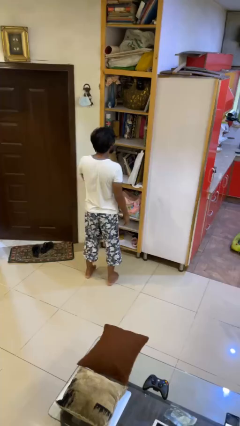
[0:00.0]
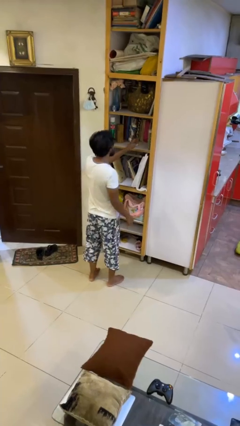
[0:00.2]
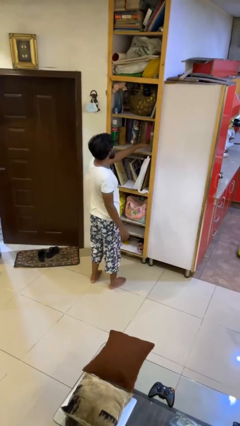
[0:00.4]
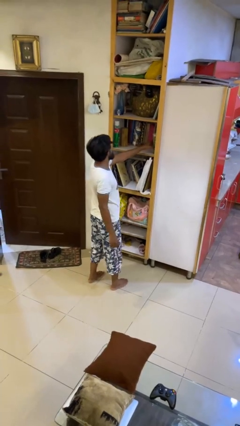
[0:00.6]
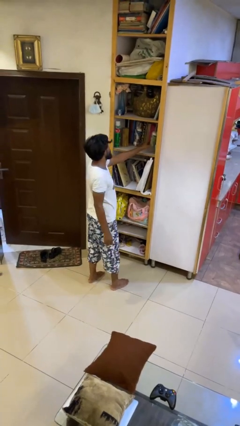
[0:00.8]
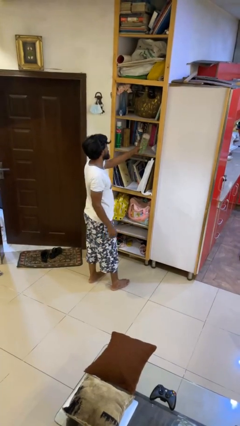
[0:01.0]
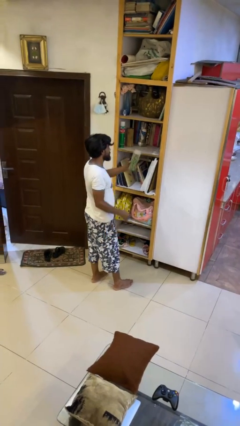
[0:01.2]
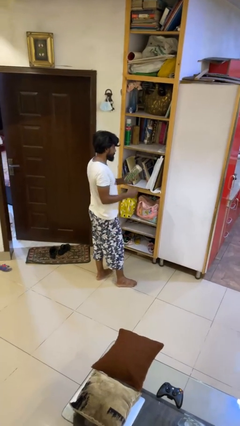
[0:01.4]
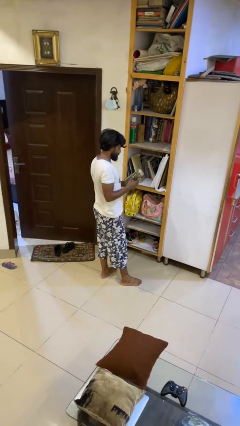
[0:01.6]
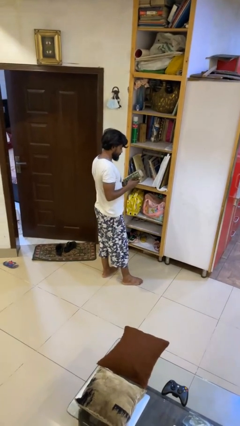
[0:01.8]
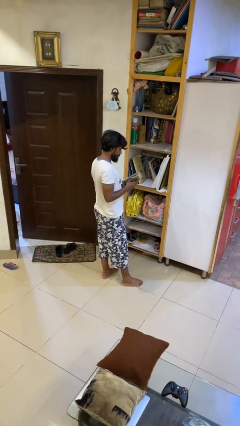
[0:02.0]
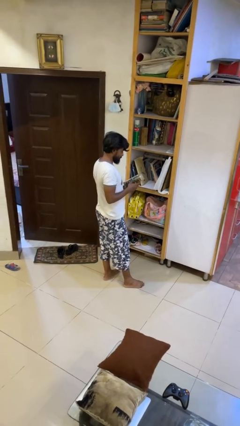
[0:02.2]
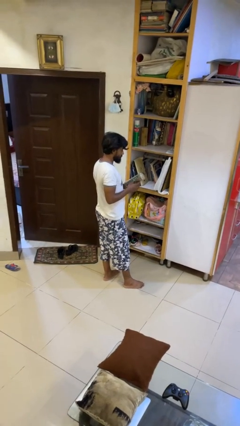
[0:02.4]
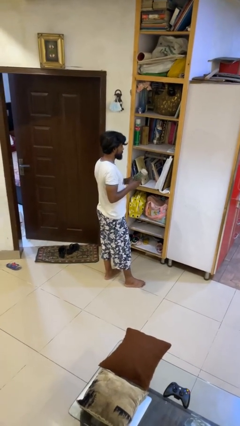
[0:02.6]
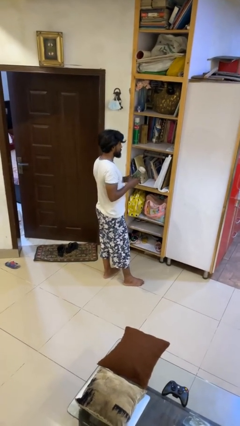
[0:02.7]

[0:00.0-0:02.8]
person picks up object from cabinet

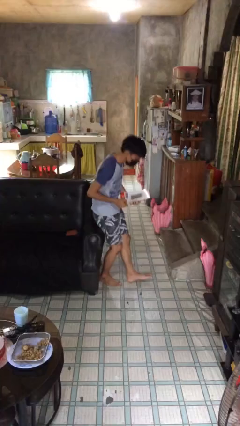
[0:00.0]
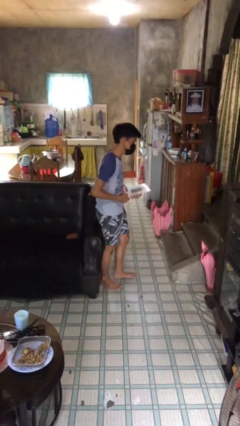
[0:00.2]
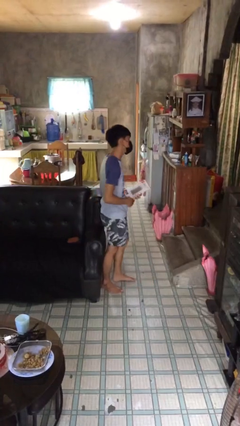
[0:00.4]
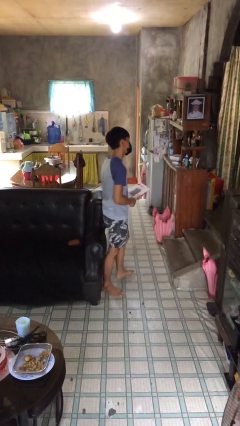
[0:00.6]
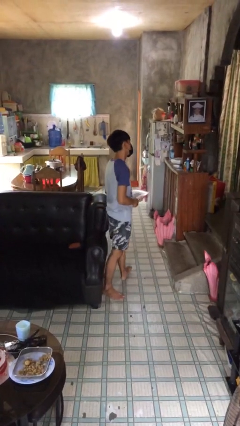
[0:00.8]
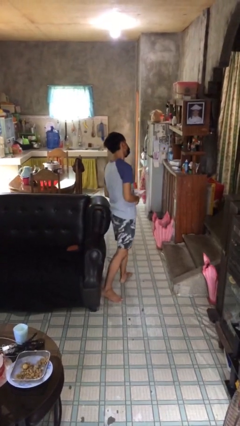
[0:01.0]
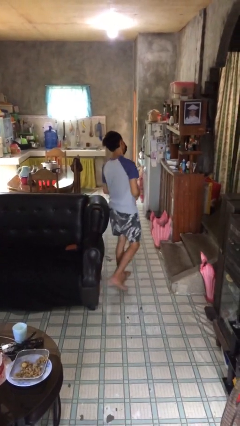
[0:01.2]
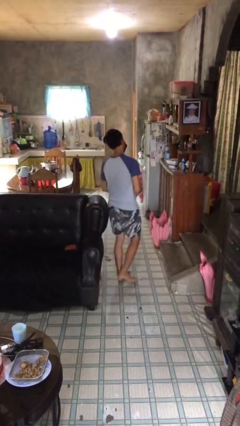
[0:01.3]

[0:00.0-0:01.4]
person stands up

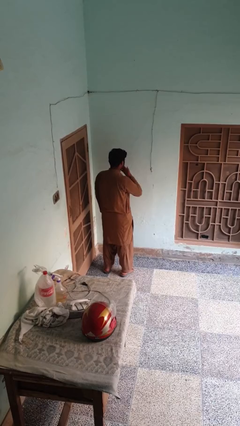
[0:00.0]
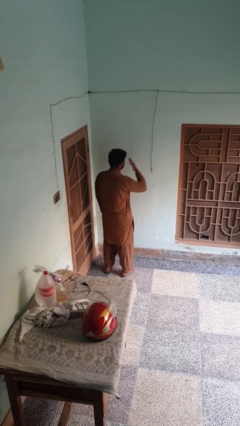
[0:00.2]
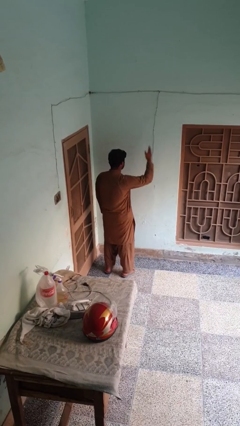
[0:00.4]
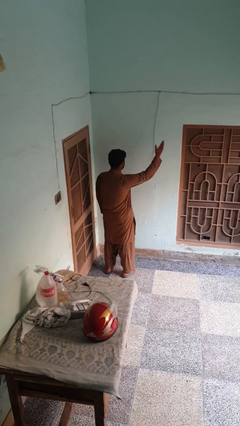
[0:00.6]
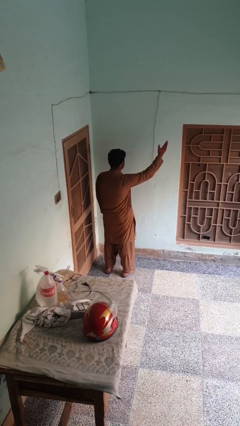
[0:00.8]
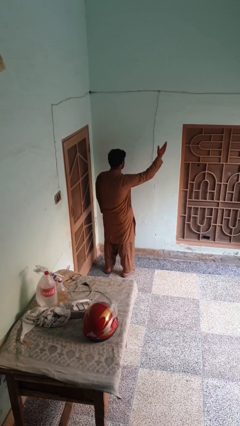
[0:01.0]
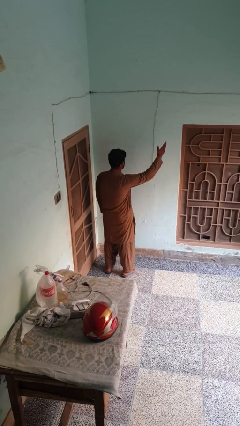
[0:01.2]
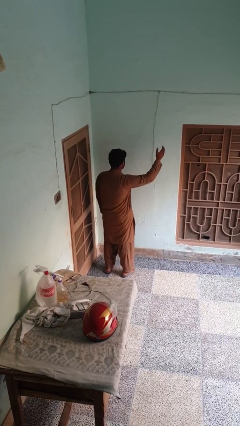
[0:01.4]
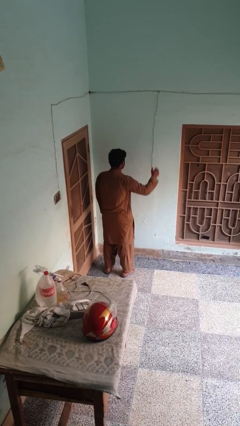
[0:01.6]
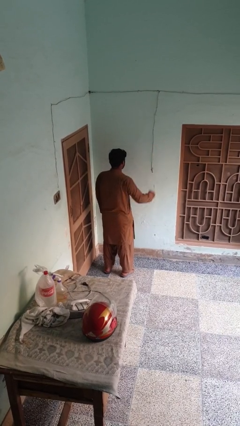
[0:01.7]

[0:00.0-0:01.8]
person gestures blow kiss

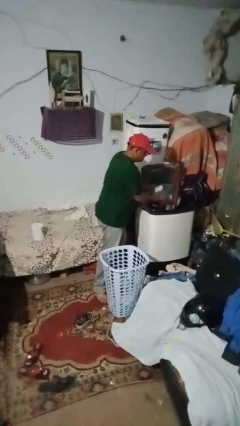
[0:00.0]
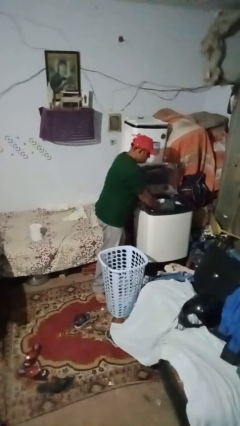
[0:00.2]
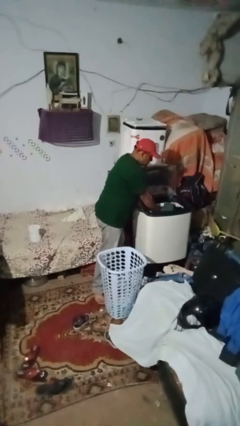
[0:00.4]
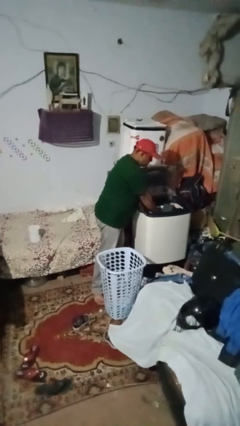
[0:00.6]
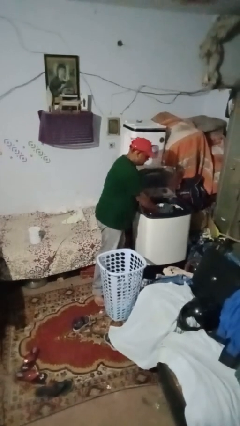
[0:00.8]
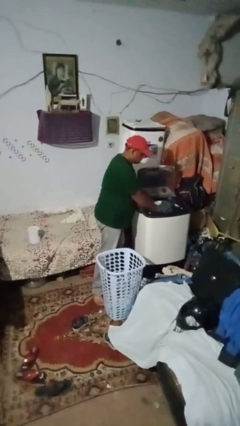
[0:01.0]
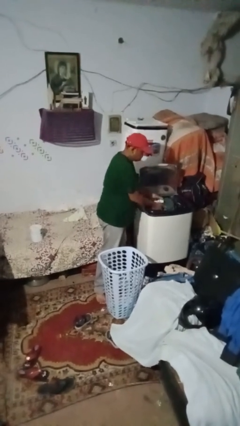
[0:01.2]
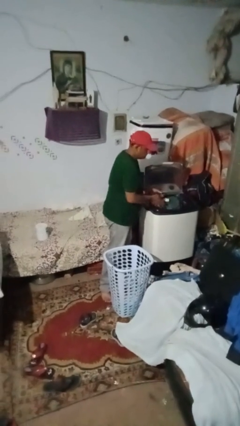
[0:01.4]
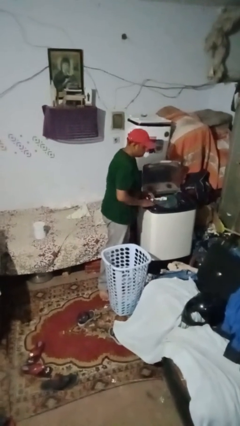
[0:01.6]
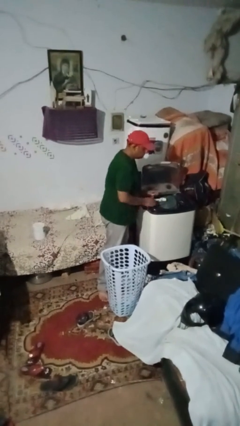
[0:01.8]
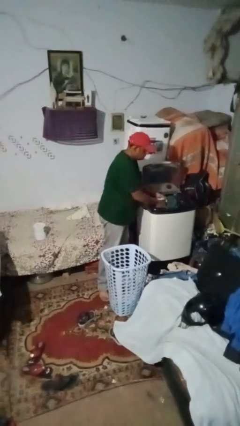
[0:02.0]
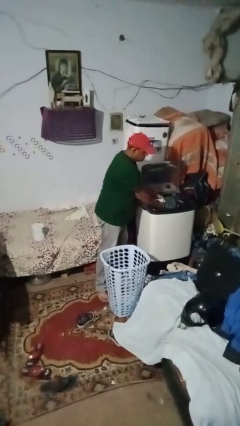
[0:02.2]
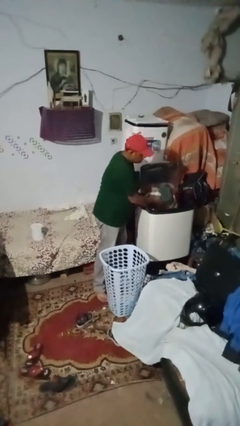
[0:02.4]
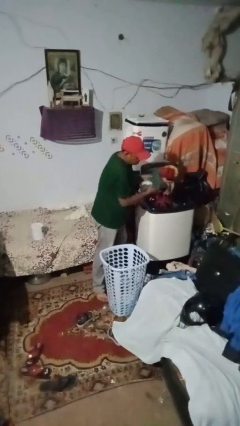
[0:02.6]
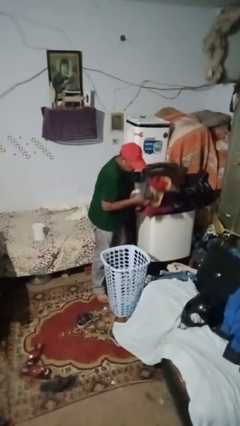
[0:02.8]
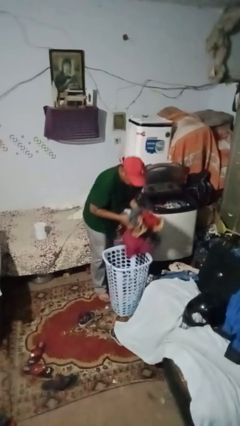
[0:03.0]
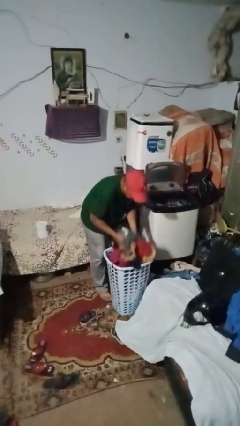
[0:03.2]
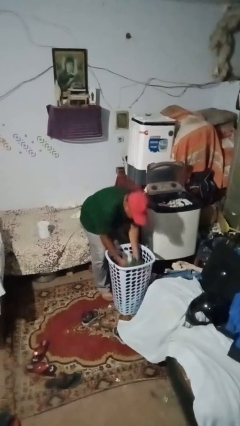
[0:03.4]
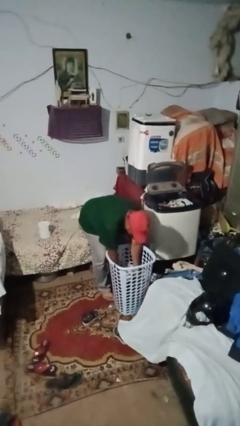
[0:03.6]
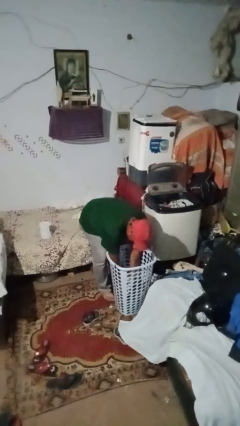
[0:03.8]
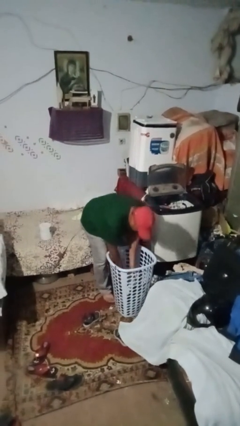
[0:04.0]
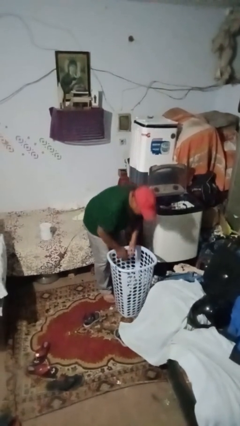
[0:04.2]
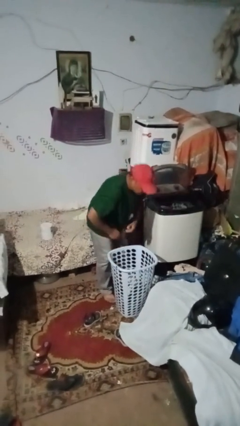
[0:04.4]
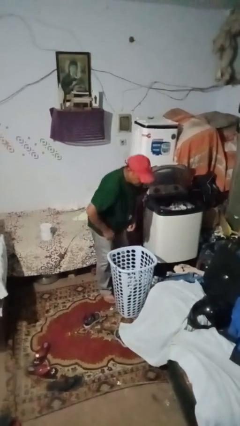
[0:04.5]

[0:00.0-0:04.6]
person loads dryer

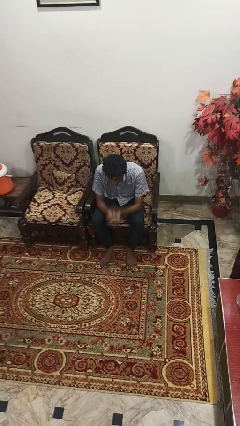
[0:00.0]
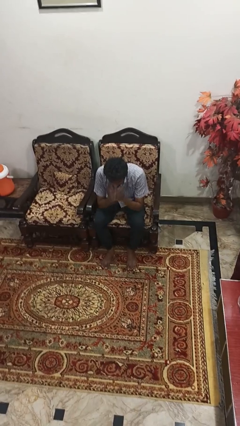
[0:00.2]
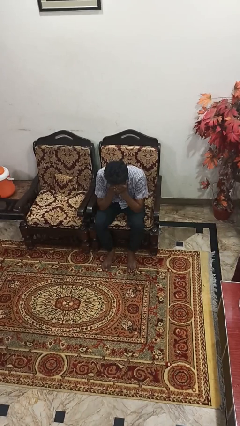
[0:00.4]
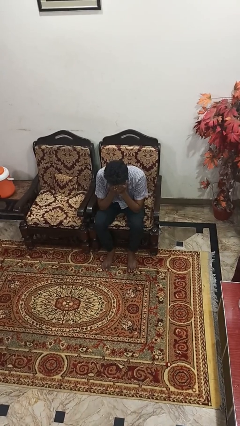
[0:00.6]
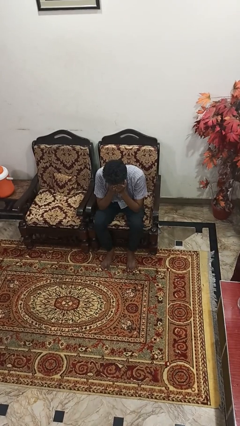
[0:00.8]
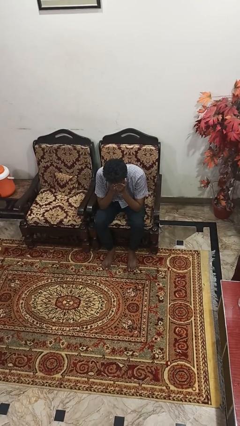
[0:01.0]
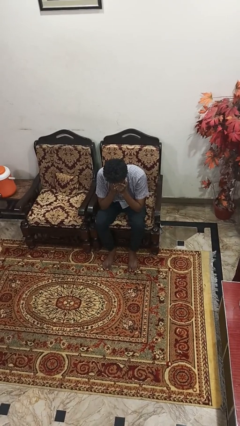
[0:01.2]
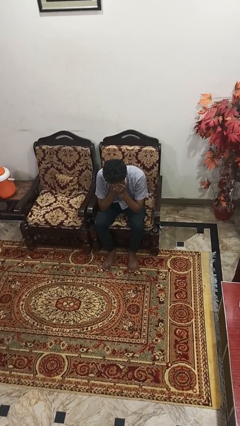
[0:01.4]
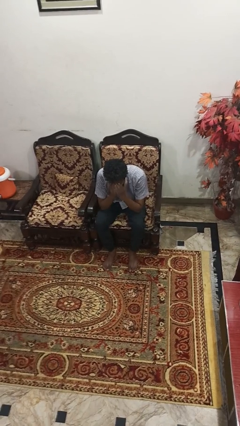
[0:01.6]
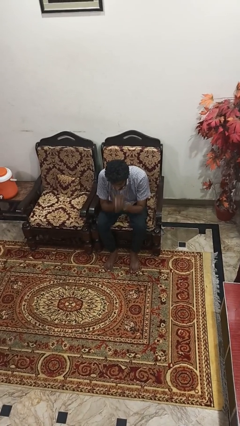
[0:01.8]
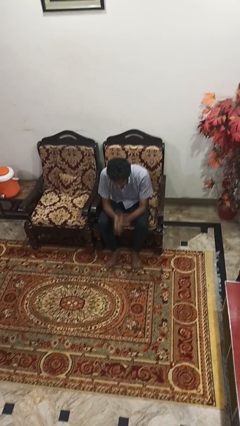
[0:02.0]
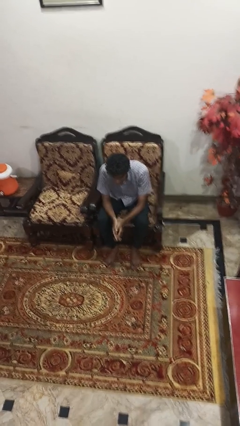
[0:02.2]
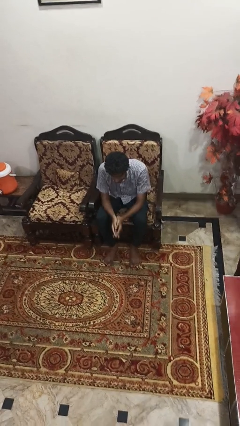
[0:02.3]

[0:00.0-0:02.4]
person covers face with hands

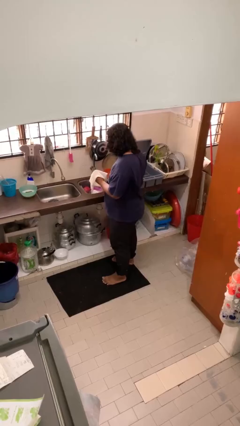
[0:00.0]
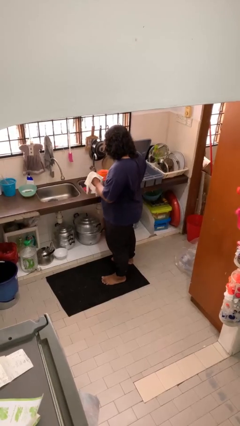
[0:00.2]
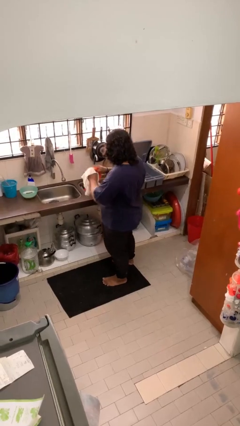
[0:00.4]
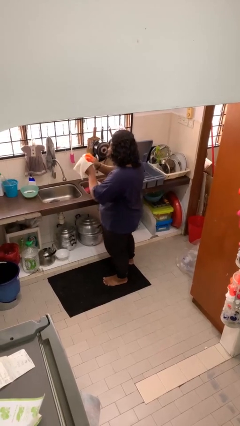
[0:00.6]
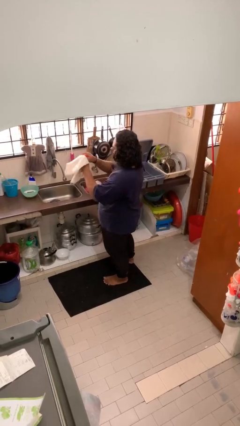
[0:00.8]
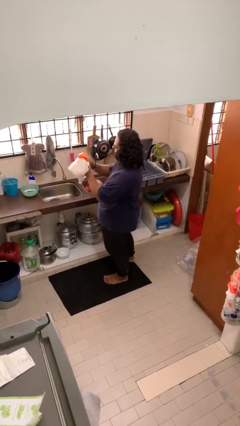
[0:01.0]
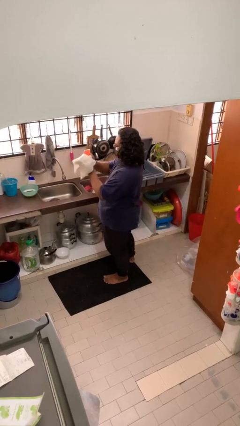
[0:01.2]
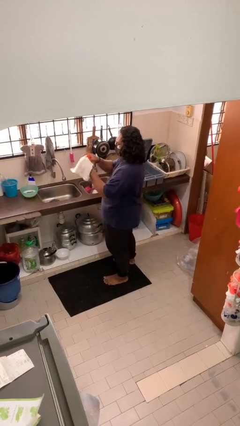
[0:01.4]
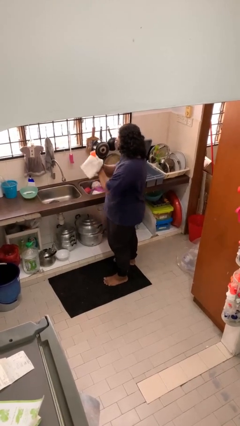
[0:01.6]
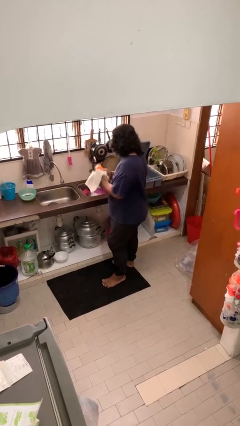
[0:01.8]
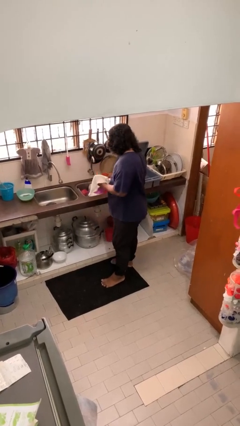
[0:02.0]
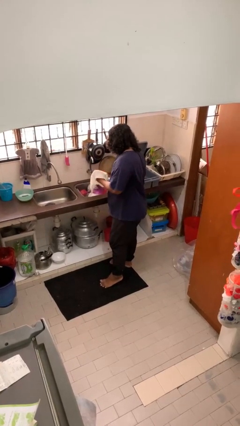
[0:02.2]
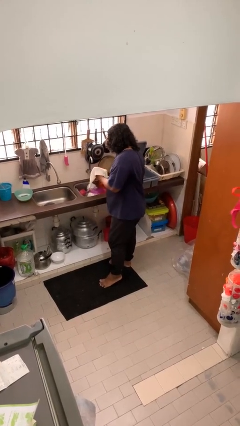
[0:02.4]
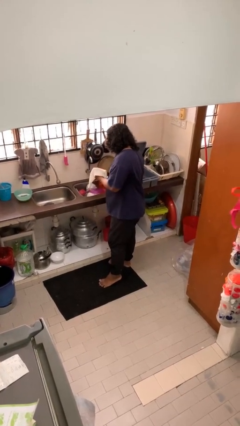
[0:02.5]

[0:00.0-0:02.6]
person dries dish

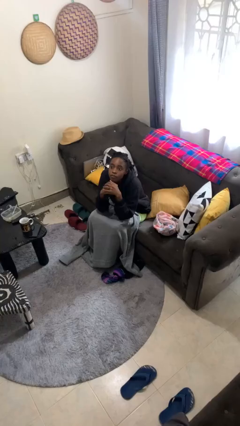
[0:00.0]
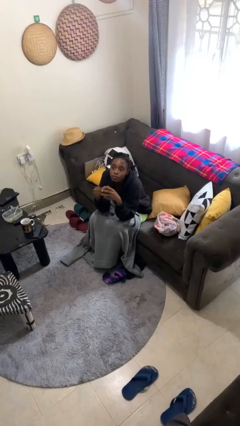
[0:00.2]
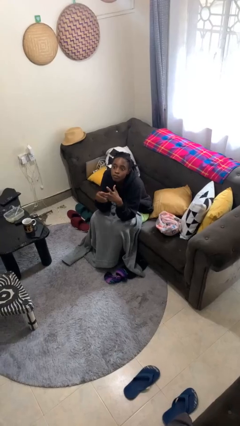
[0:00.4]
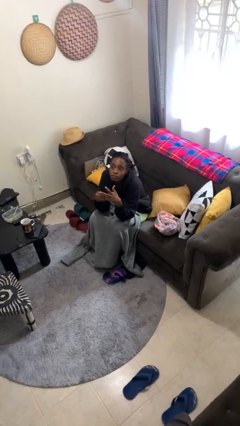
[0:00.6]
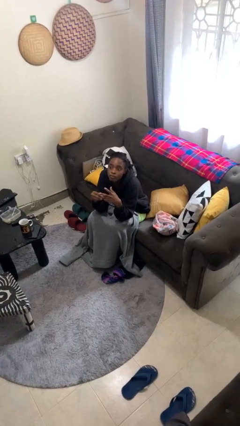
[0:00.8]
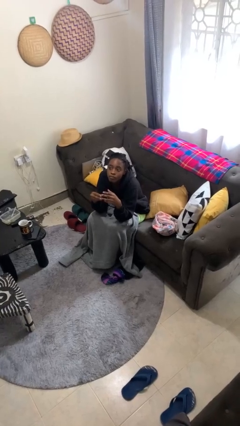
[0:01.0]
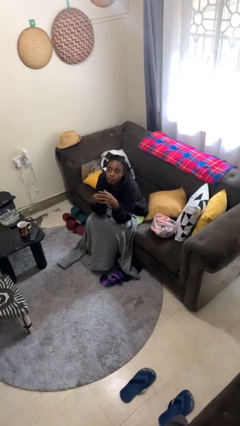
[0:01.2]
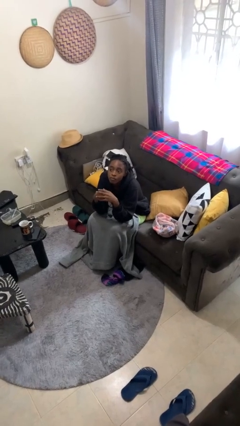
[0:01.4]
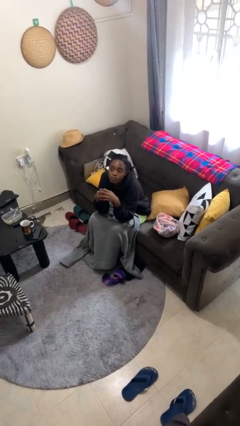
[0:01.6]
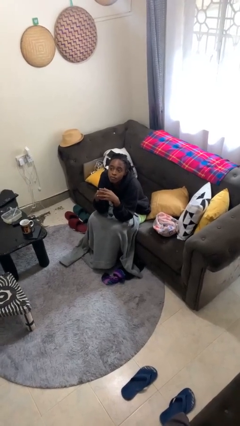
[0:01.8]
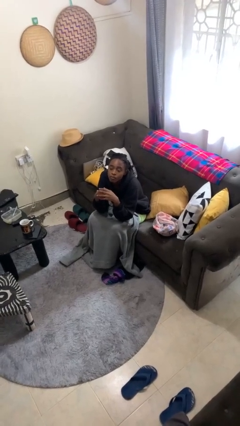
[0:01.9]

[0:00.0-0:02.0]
person takes off ring

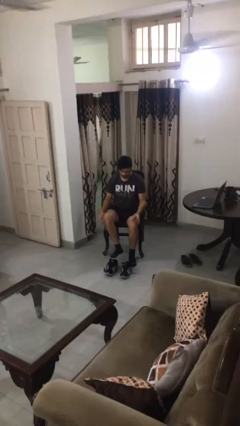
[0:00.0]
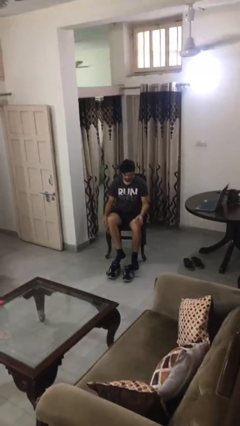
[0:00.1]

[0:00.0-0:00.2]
person takes off shoes
